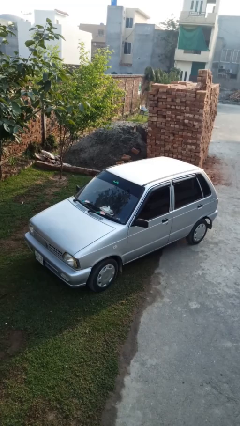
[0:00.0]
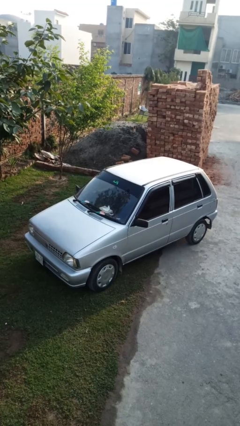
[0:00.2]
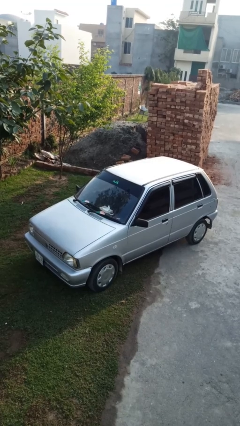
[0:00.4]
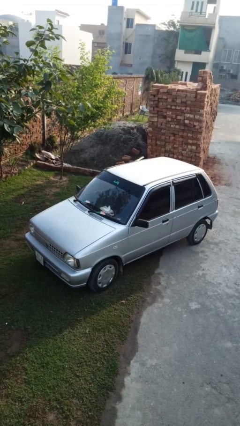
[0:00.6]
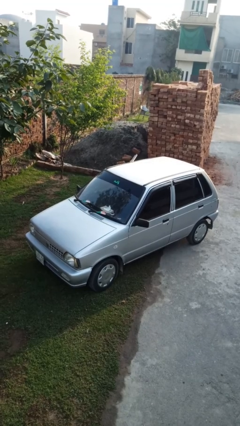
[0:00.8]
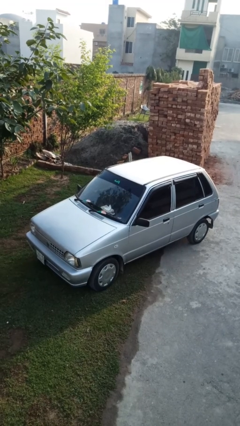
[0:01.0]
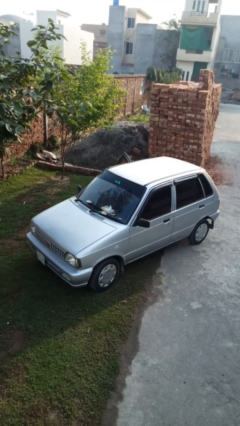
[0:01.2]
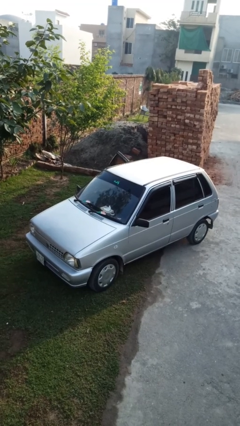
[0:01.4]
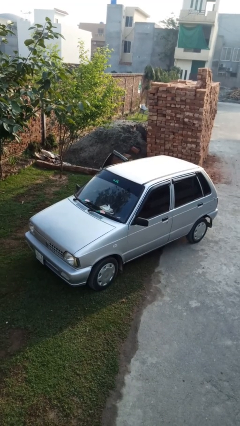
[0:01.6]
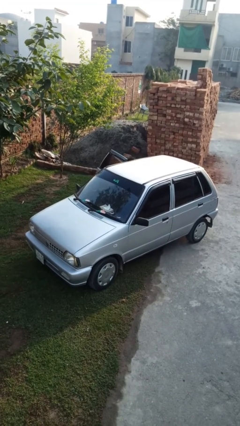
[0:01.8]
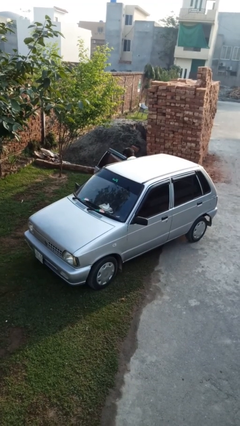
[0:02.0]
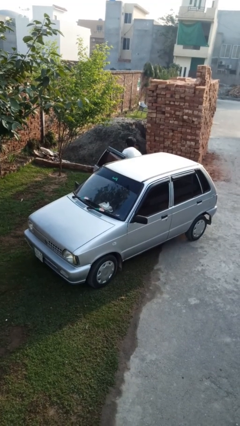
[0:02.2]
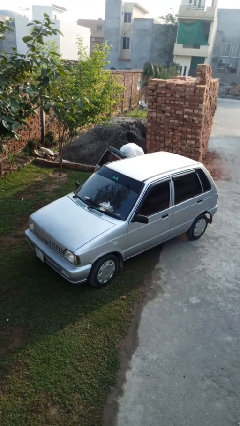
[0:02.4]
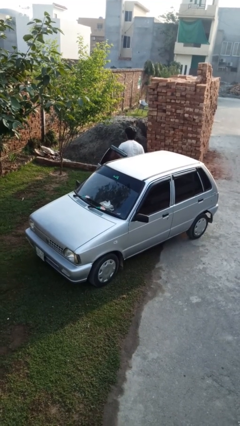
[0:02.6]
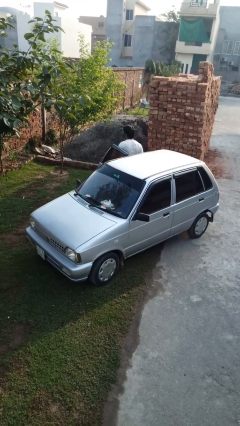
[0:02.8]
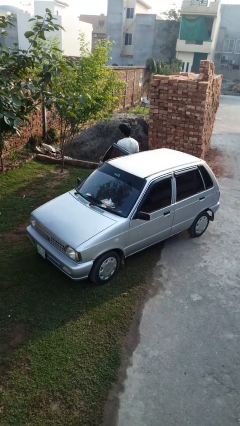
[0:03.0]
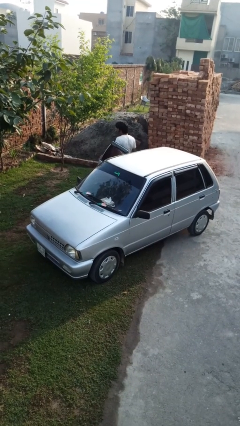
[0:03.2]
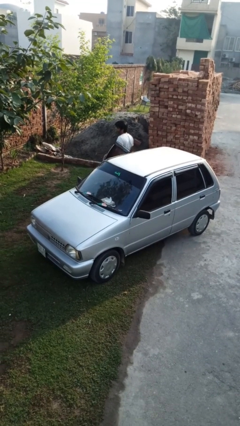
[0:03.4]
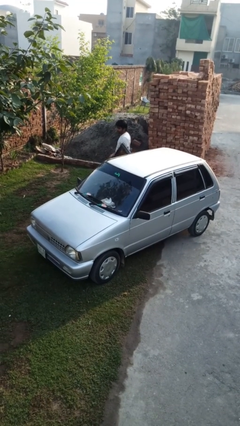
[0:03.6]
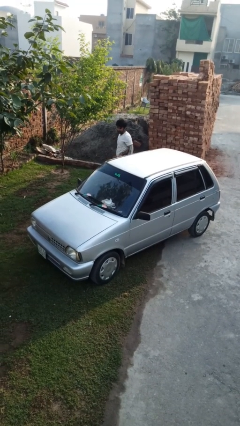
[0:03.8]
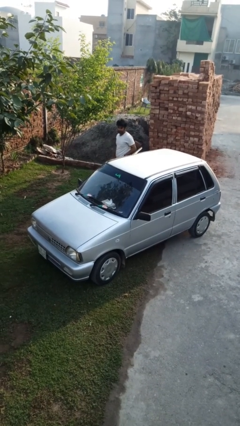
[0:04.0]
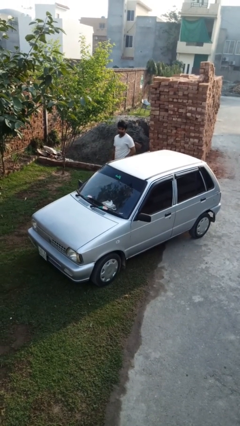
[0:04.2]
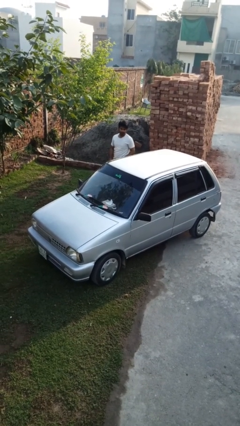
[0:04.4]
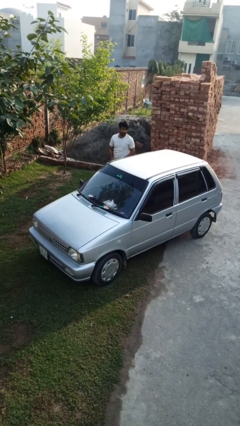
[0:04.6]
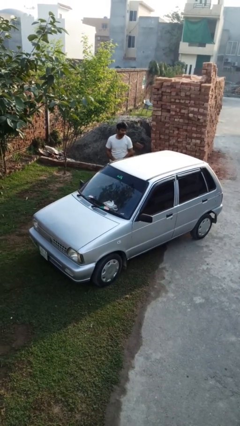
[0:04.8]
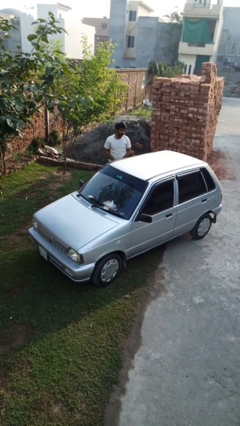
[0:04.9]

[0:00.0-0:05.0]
car drops off person

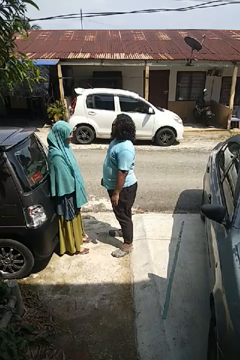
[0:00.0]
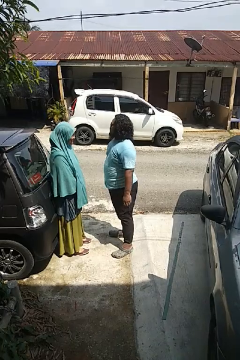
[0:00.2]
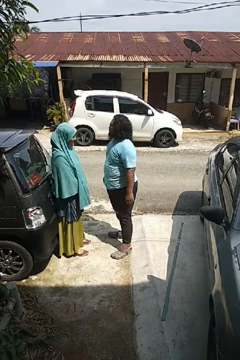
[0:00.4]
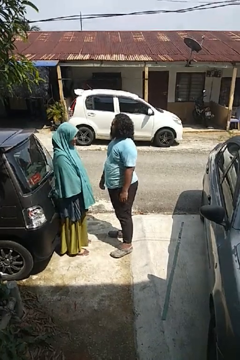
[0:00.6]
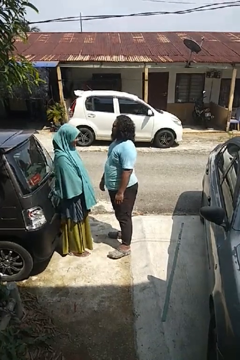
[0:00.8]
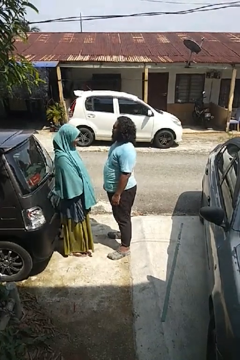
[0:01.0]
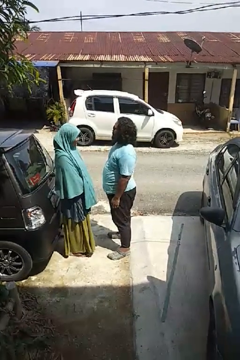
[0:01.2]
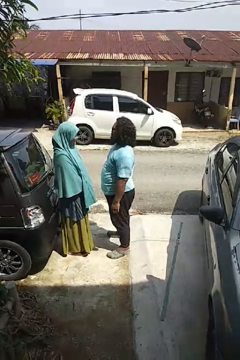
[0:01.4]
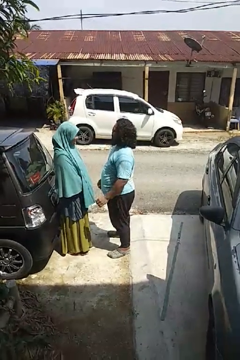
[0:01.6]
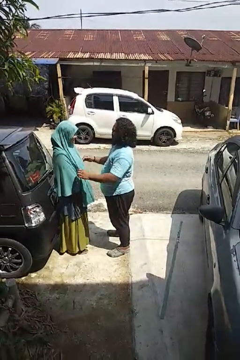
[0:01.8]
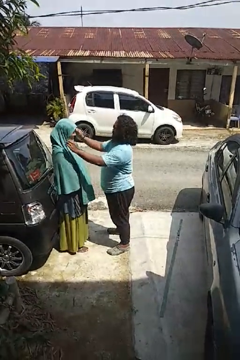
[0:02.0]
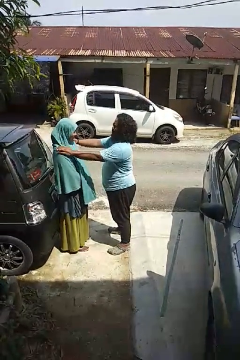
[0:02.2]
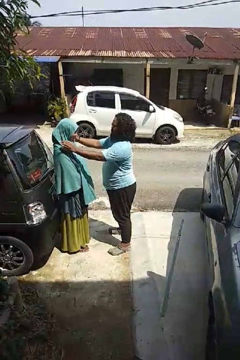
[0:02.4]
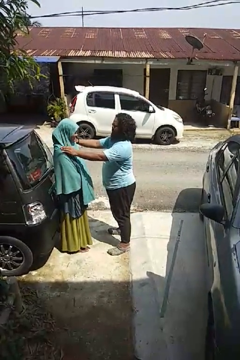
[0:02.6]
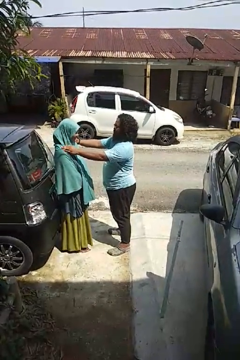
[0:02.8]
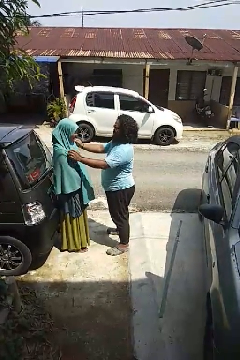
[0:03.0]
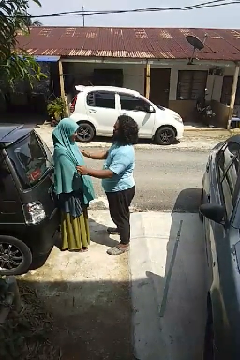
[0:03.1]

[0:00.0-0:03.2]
person pounds shoulders of person

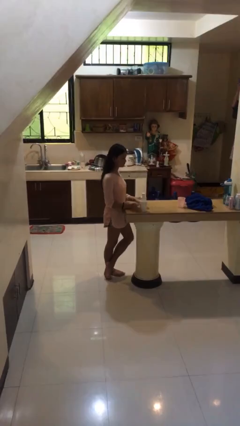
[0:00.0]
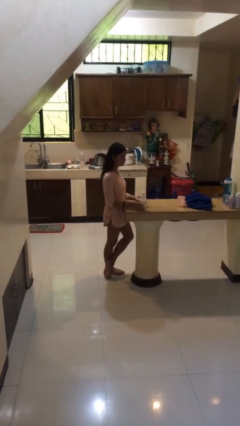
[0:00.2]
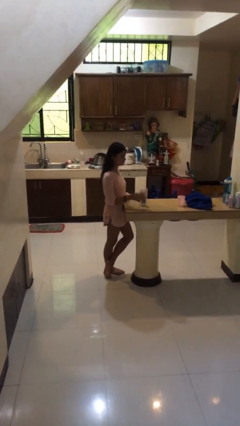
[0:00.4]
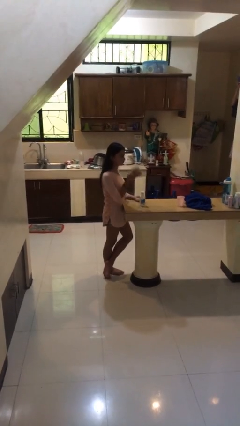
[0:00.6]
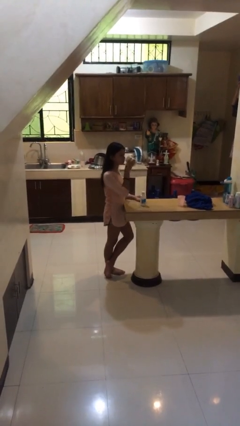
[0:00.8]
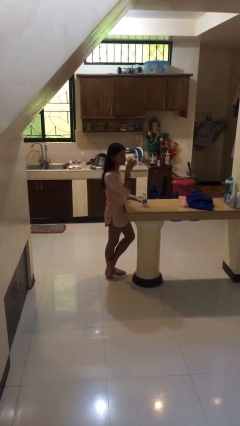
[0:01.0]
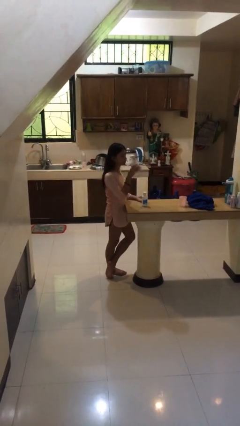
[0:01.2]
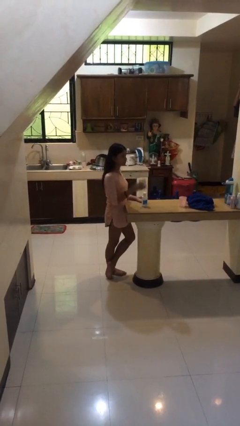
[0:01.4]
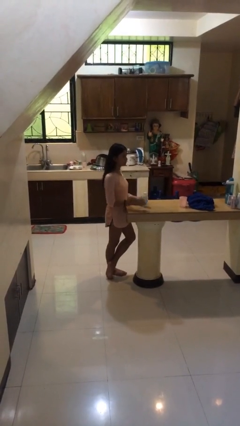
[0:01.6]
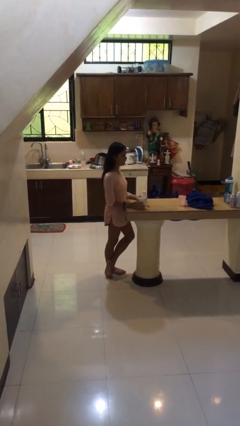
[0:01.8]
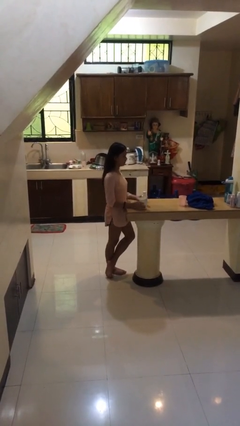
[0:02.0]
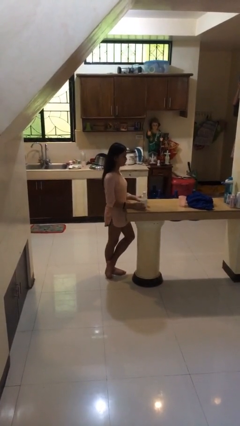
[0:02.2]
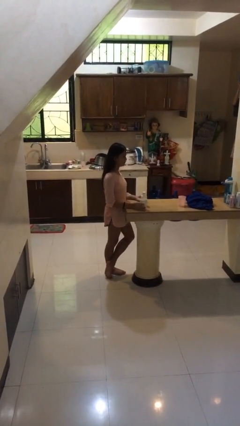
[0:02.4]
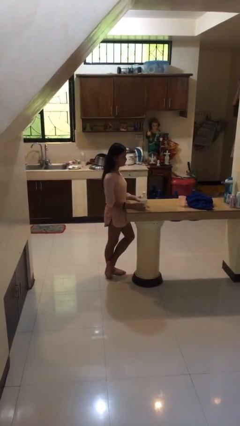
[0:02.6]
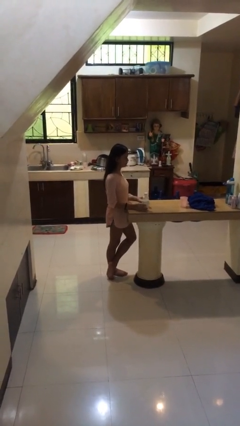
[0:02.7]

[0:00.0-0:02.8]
person drinks from cup

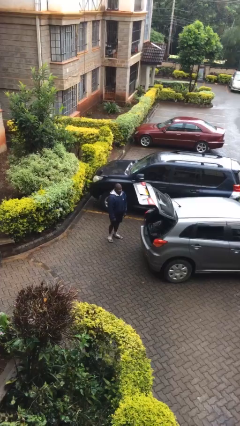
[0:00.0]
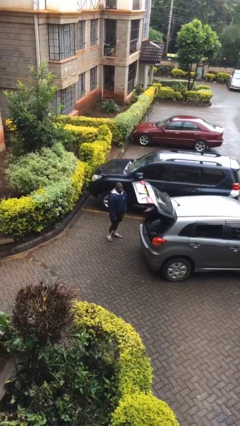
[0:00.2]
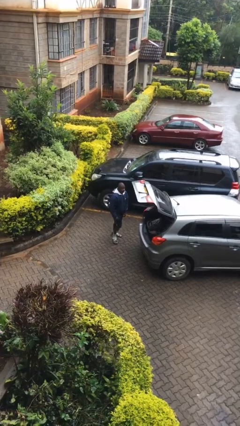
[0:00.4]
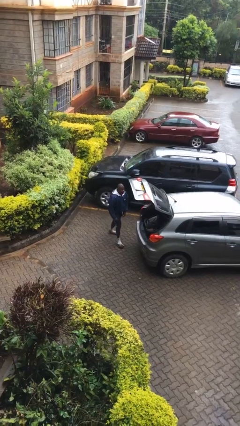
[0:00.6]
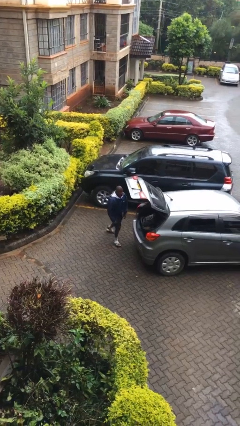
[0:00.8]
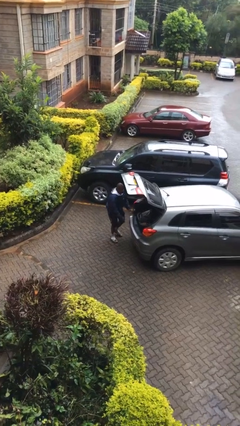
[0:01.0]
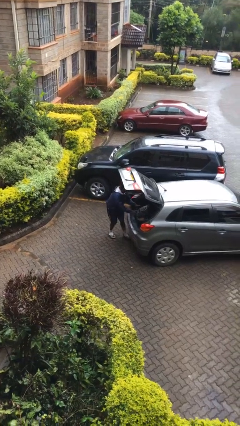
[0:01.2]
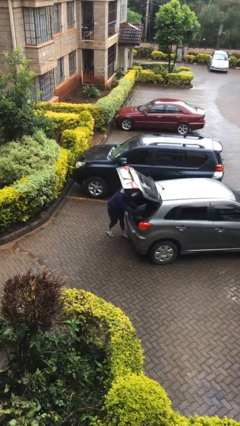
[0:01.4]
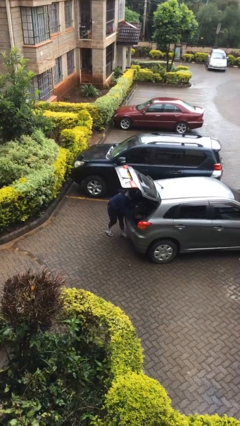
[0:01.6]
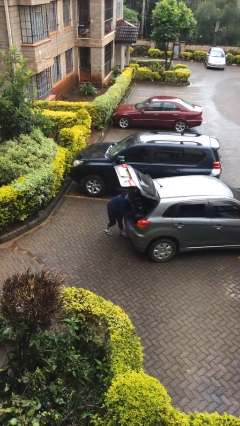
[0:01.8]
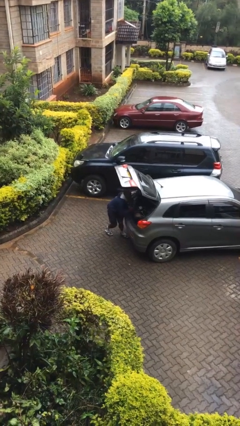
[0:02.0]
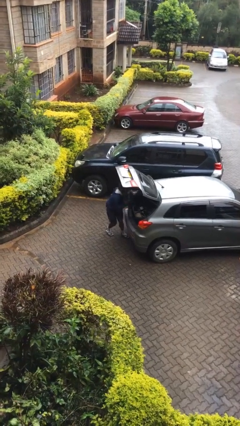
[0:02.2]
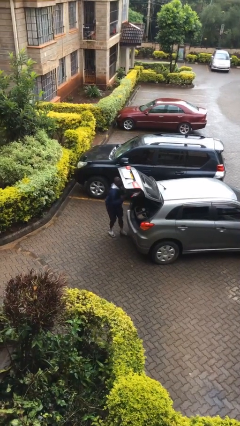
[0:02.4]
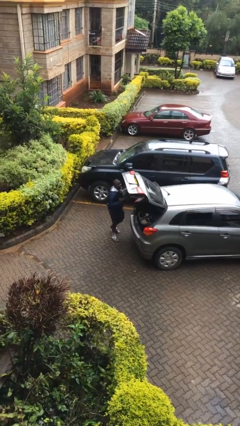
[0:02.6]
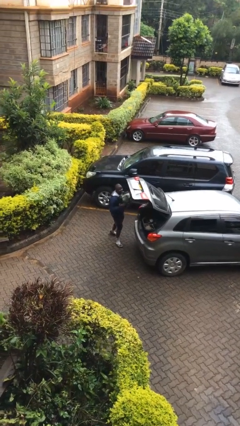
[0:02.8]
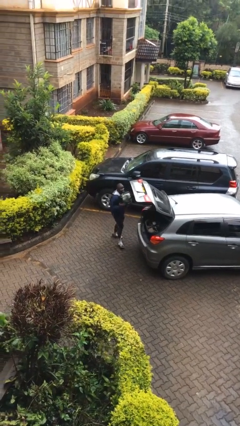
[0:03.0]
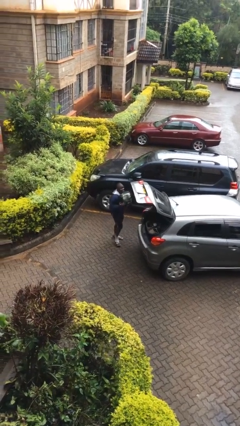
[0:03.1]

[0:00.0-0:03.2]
person unloads car

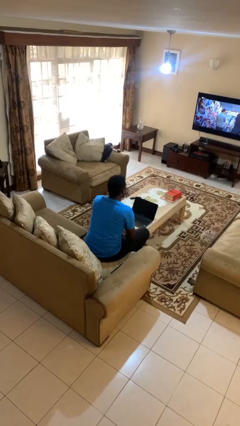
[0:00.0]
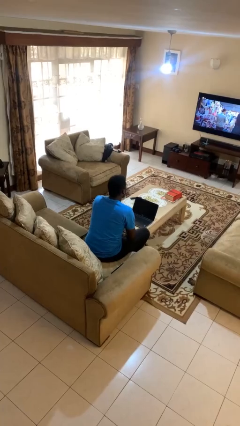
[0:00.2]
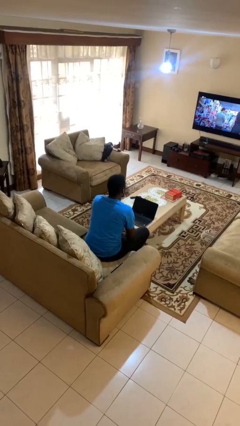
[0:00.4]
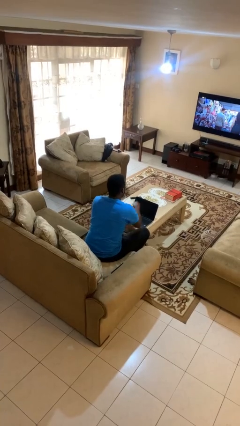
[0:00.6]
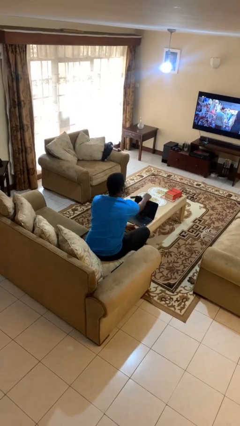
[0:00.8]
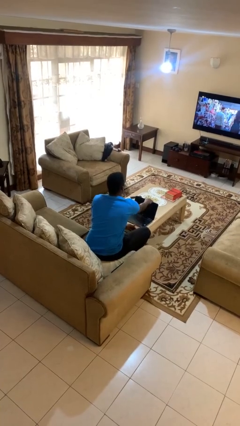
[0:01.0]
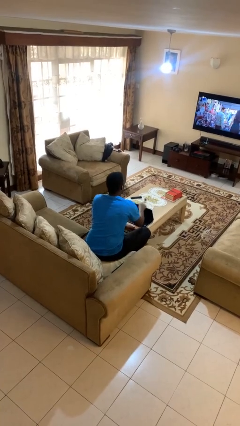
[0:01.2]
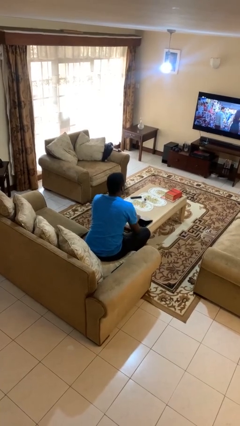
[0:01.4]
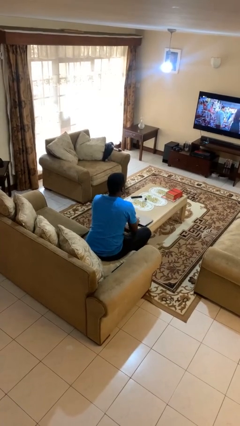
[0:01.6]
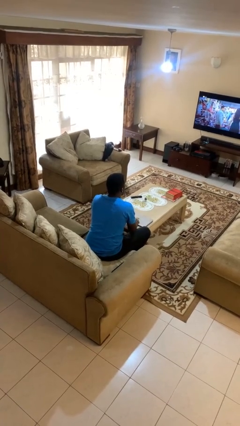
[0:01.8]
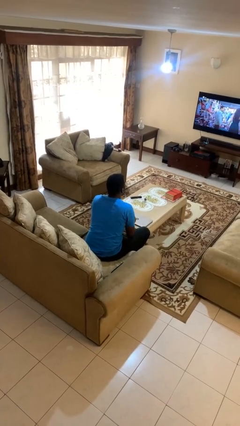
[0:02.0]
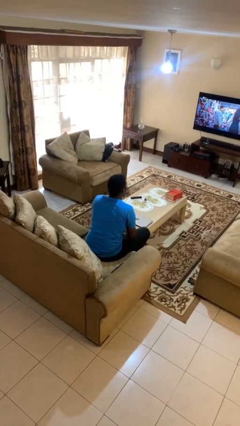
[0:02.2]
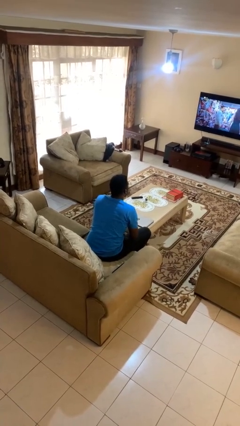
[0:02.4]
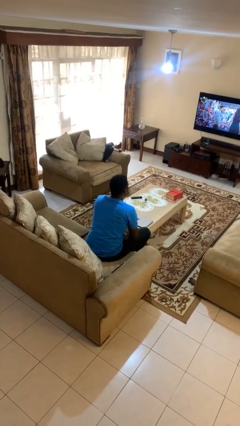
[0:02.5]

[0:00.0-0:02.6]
person closes laptop

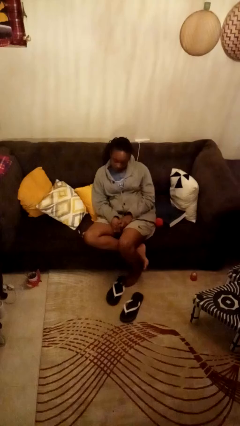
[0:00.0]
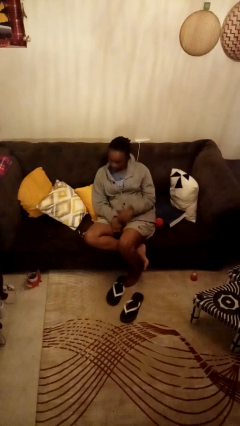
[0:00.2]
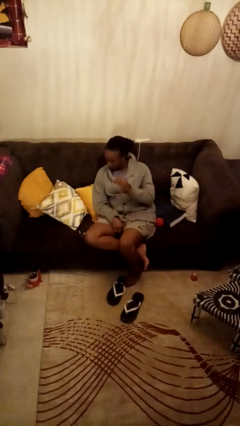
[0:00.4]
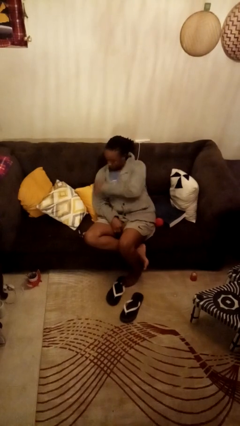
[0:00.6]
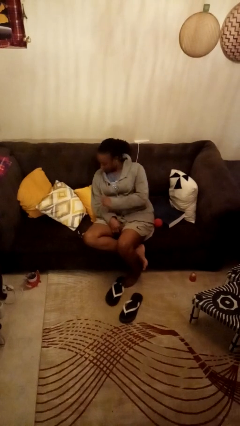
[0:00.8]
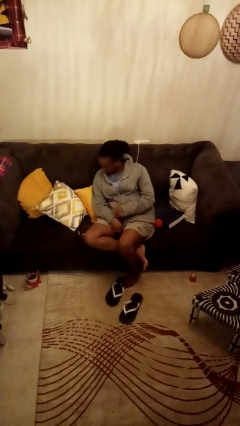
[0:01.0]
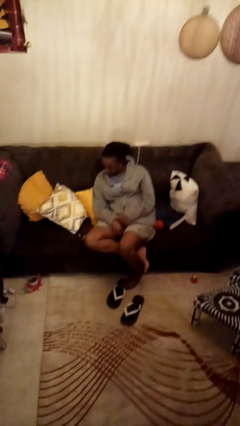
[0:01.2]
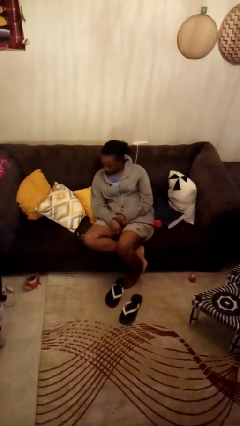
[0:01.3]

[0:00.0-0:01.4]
person swats bug
